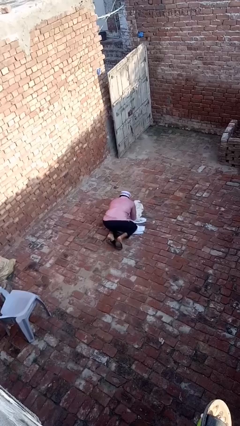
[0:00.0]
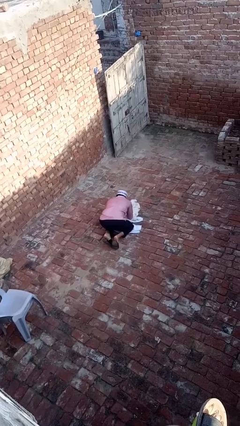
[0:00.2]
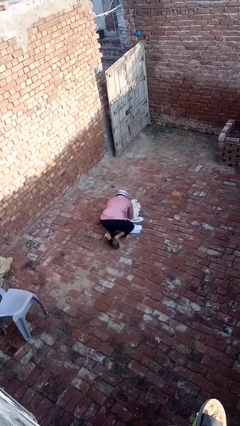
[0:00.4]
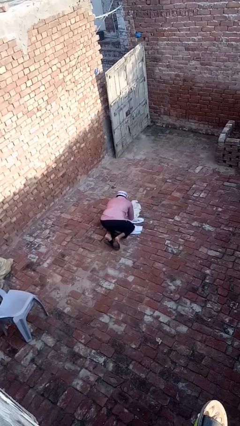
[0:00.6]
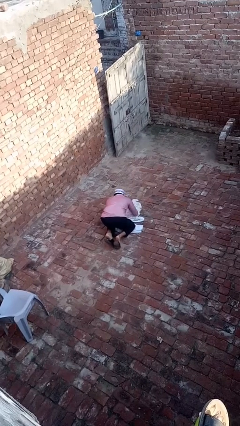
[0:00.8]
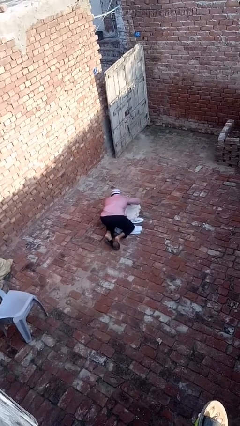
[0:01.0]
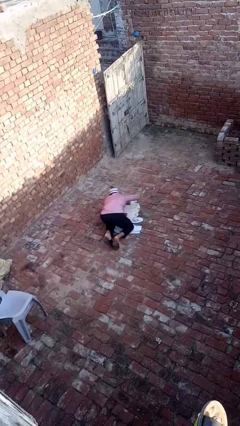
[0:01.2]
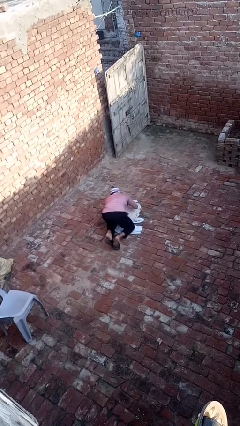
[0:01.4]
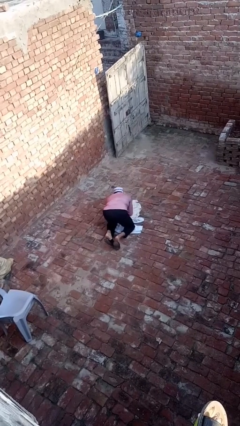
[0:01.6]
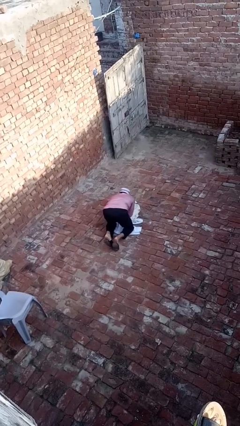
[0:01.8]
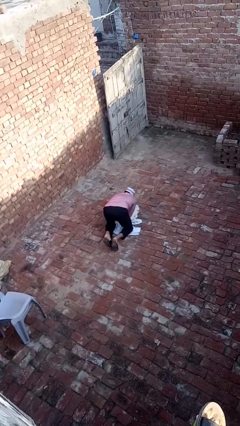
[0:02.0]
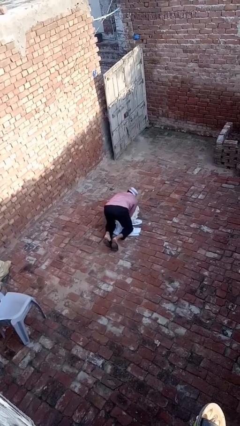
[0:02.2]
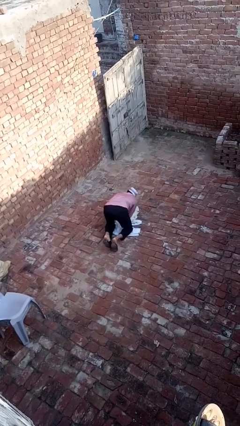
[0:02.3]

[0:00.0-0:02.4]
person crawls

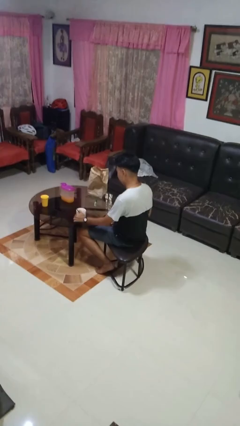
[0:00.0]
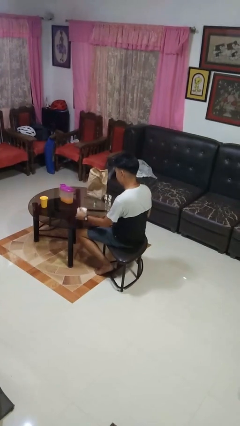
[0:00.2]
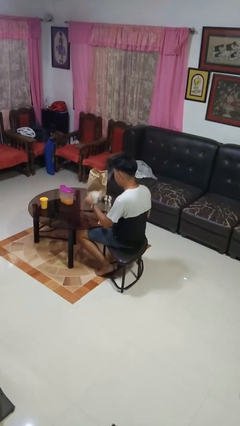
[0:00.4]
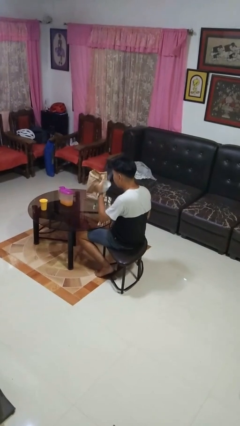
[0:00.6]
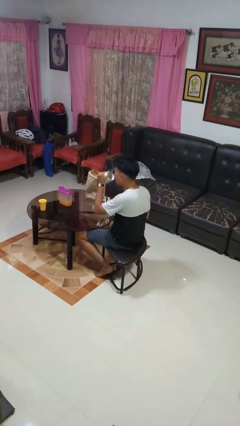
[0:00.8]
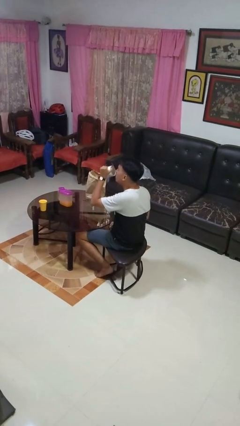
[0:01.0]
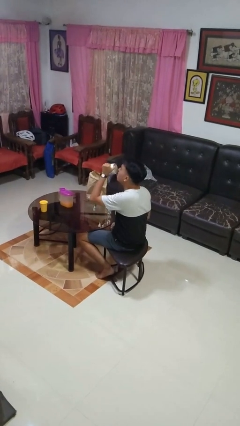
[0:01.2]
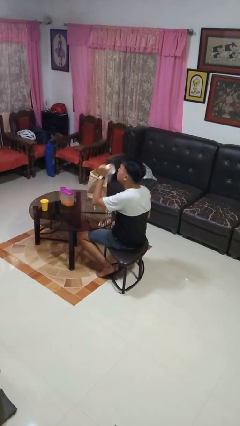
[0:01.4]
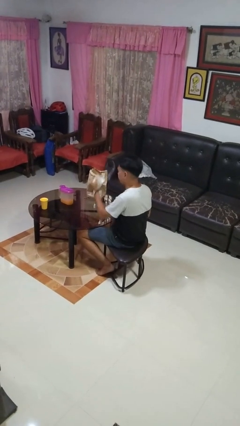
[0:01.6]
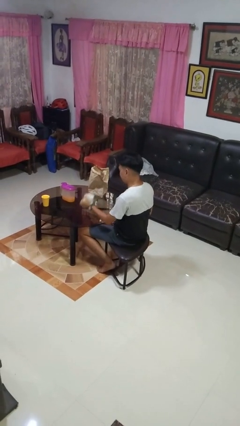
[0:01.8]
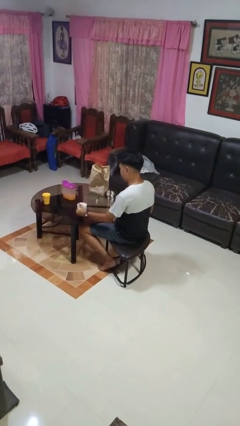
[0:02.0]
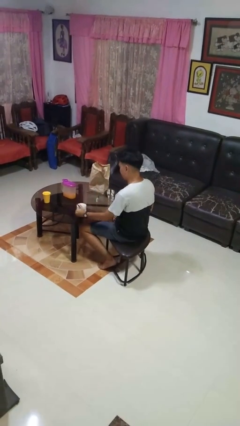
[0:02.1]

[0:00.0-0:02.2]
person drinks from mug

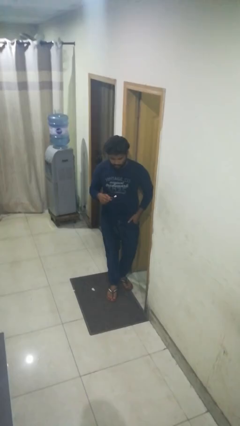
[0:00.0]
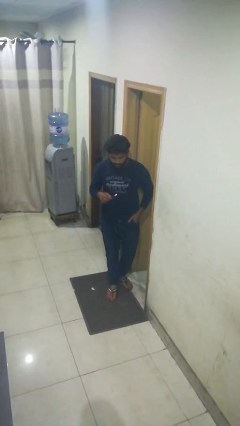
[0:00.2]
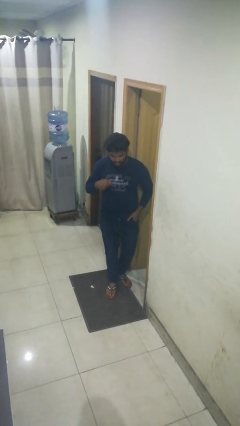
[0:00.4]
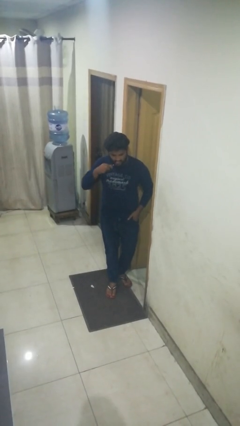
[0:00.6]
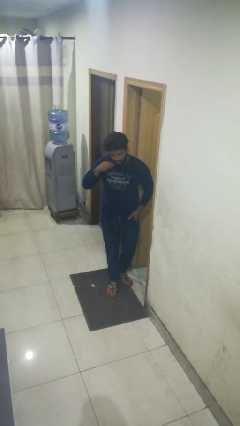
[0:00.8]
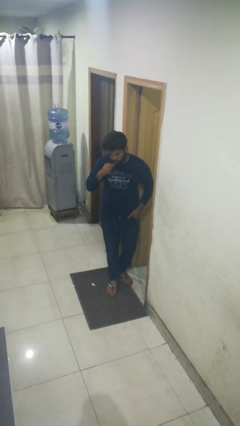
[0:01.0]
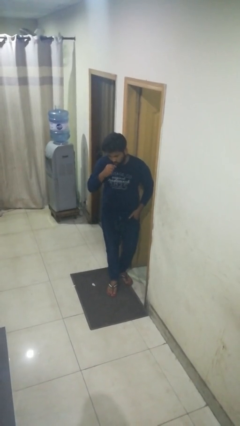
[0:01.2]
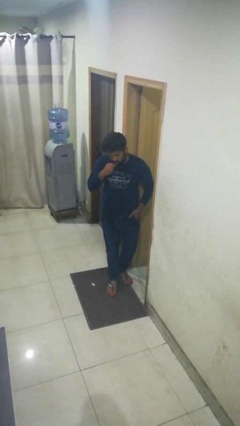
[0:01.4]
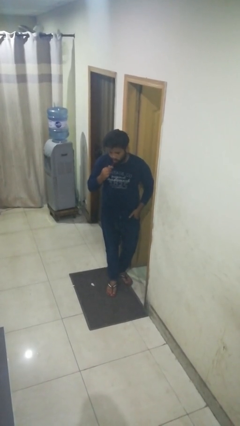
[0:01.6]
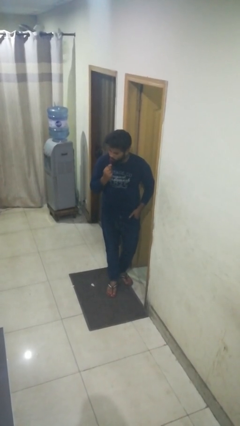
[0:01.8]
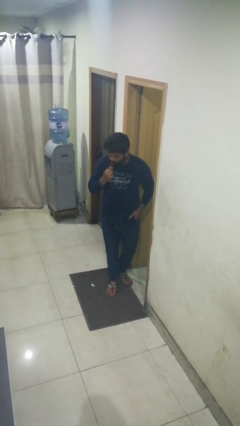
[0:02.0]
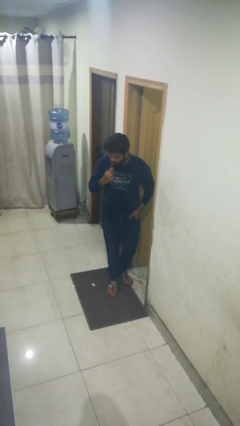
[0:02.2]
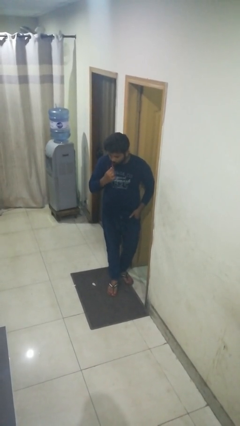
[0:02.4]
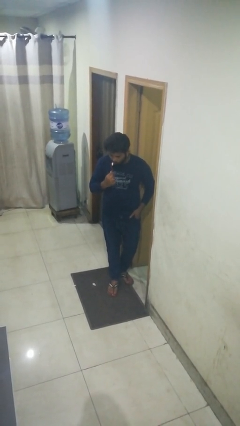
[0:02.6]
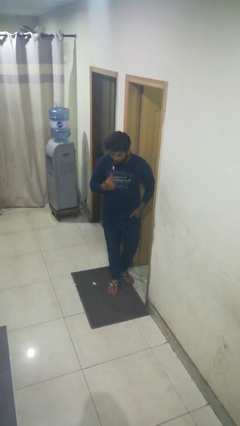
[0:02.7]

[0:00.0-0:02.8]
person brushes teeth

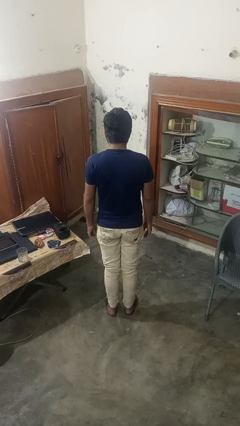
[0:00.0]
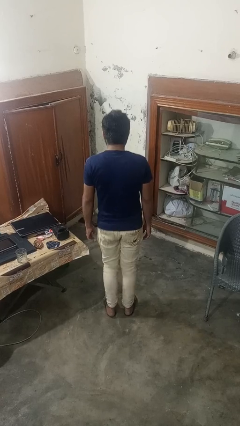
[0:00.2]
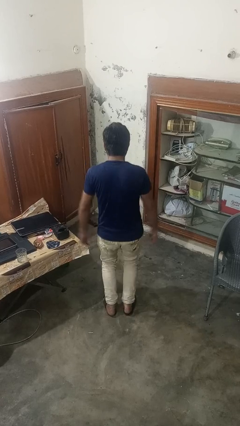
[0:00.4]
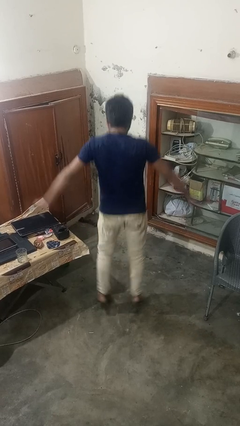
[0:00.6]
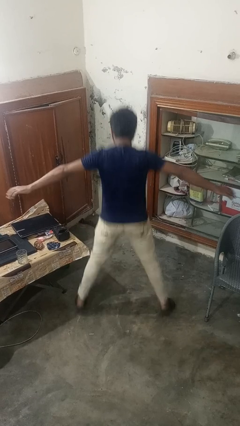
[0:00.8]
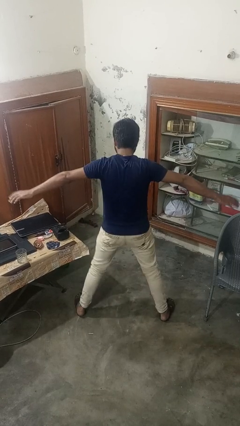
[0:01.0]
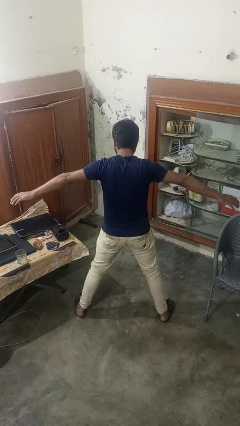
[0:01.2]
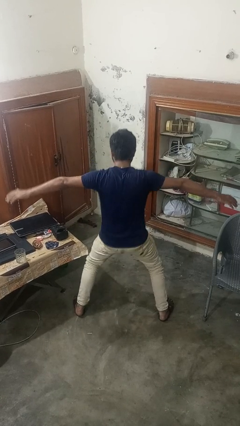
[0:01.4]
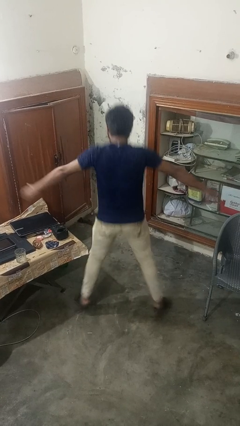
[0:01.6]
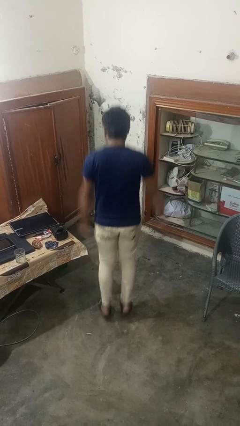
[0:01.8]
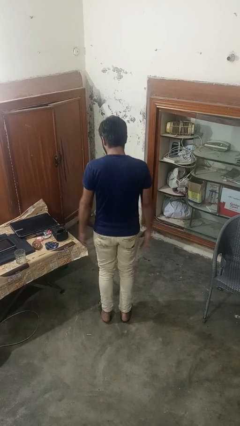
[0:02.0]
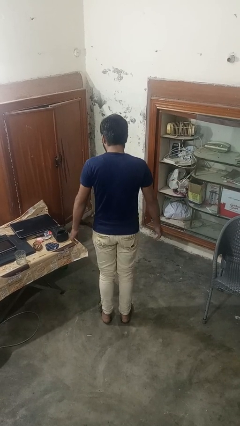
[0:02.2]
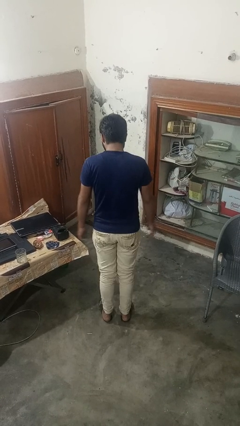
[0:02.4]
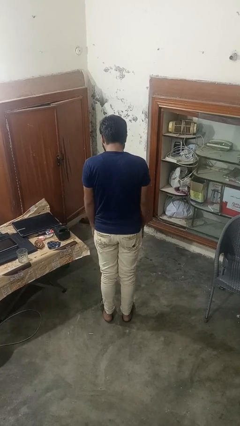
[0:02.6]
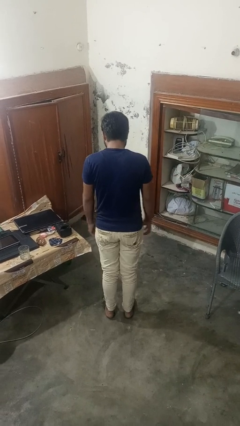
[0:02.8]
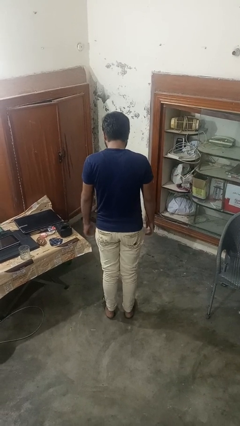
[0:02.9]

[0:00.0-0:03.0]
person exercises with jumping jacks

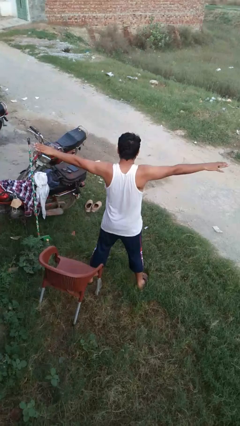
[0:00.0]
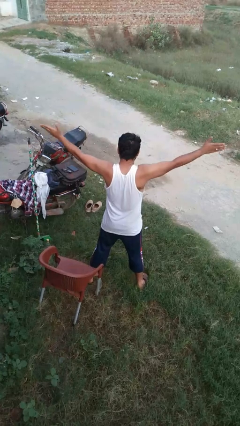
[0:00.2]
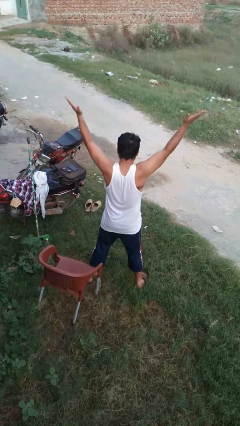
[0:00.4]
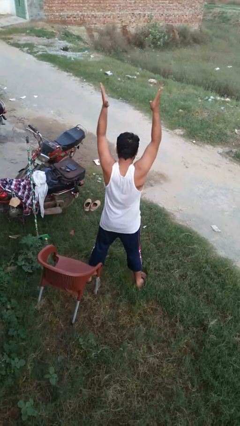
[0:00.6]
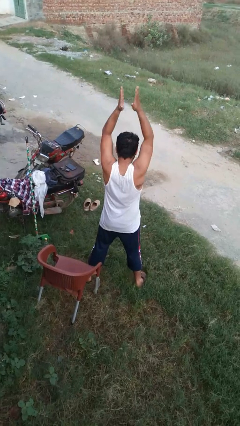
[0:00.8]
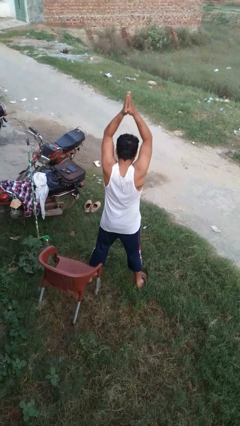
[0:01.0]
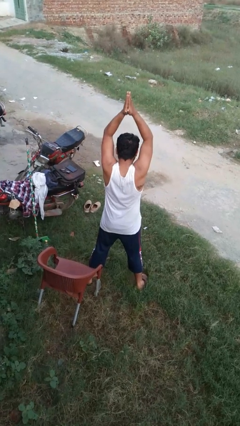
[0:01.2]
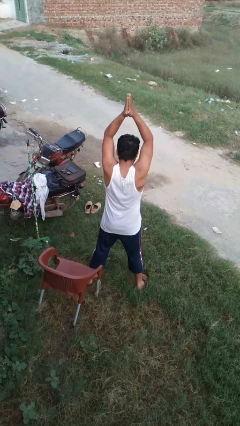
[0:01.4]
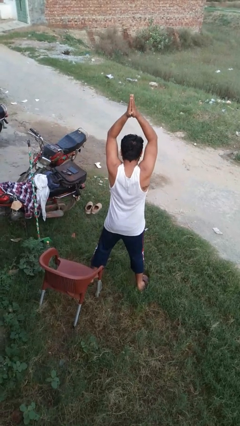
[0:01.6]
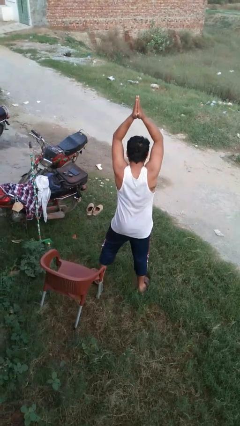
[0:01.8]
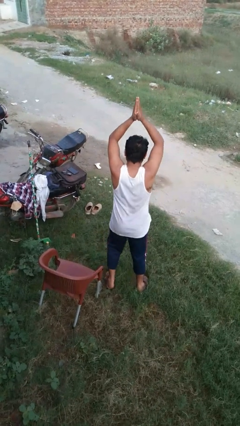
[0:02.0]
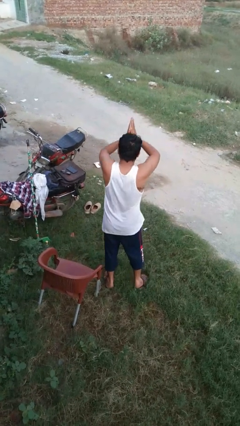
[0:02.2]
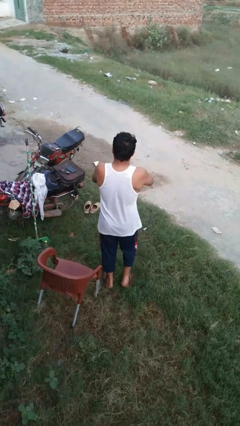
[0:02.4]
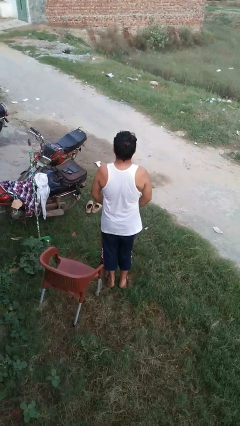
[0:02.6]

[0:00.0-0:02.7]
person stretches arms over head

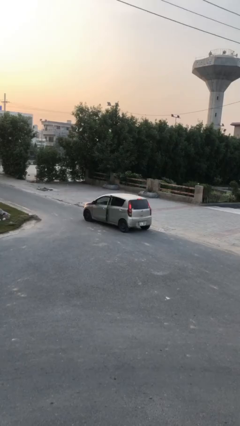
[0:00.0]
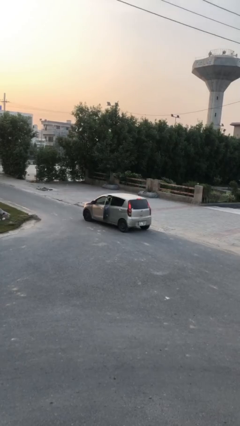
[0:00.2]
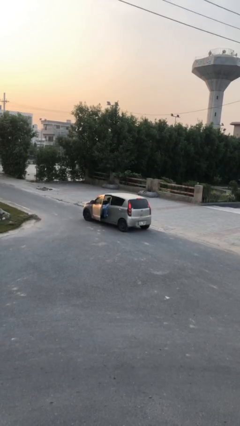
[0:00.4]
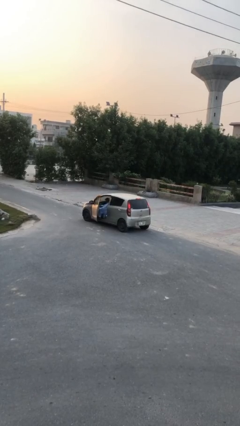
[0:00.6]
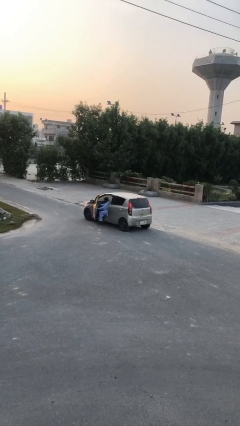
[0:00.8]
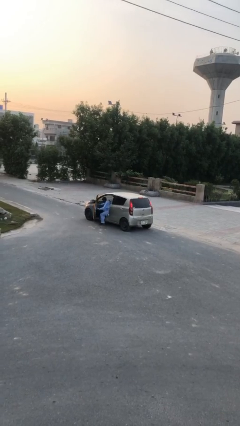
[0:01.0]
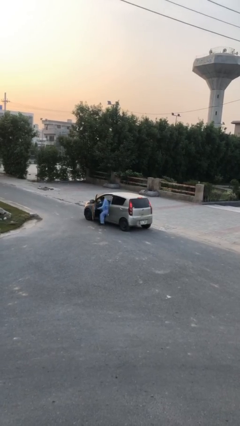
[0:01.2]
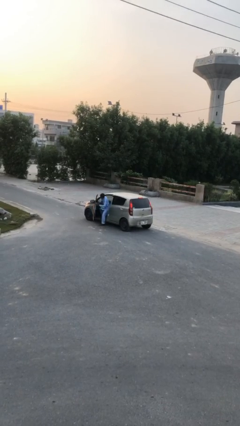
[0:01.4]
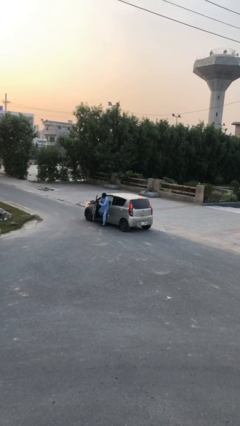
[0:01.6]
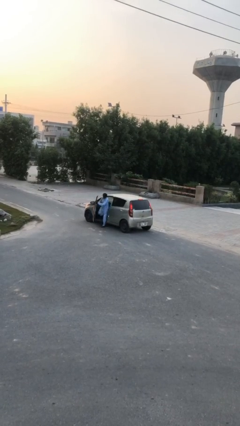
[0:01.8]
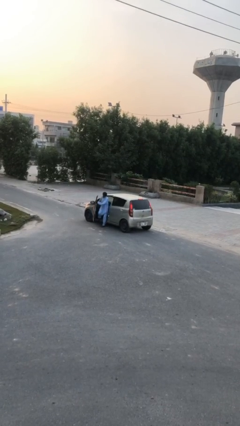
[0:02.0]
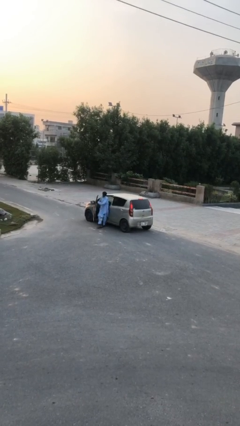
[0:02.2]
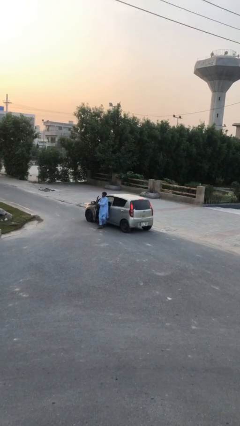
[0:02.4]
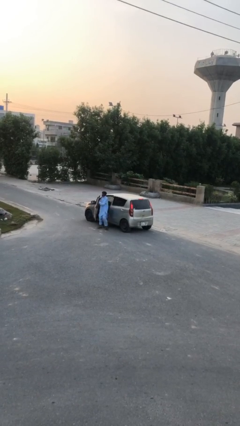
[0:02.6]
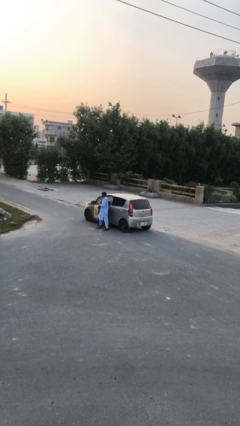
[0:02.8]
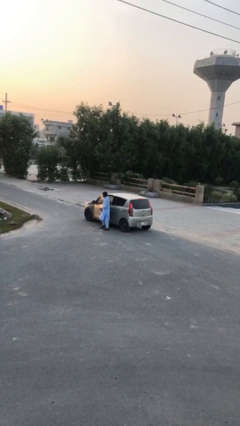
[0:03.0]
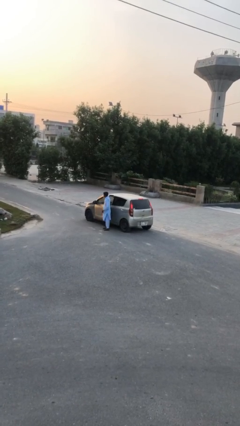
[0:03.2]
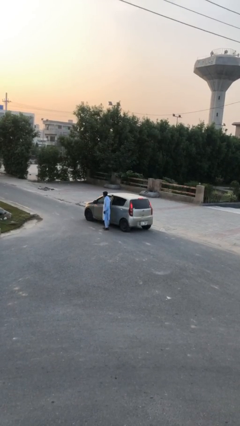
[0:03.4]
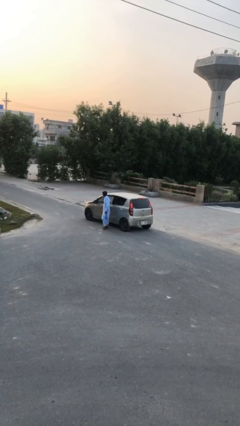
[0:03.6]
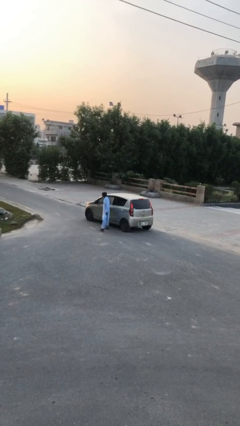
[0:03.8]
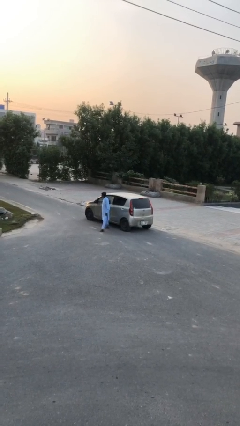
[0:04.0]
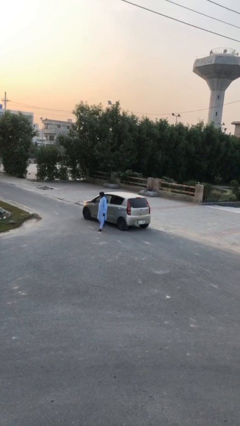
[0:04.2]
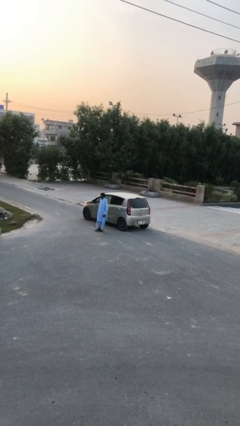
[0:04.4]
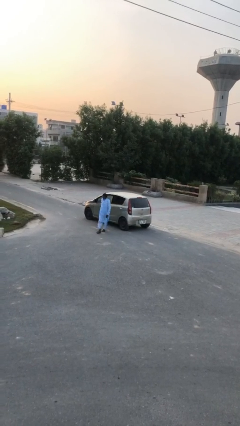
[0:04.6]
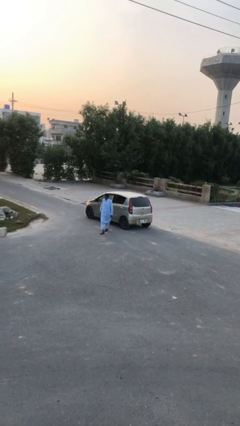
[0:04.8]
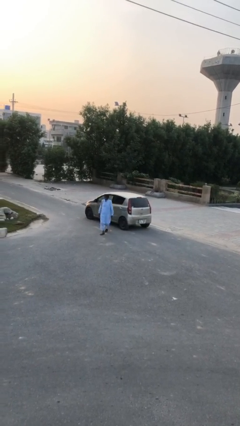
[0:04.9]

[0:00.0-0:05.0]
car drops off person
